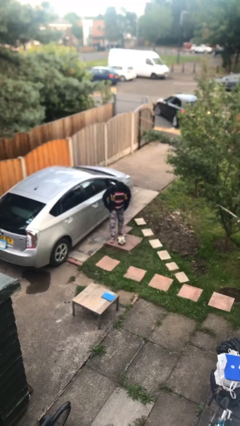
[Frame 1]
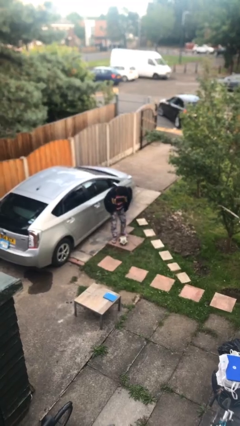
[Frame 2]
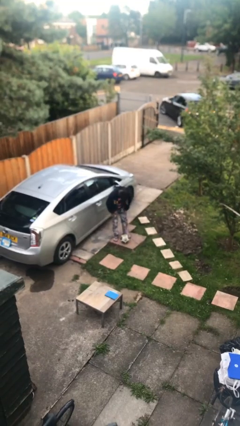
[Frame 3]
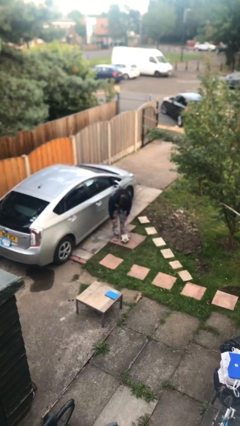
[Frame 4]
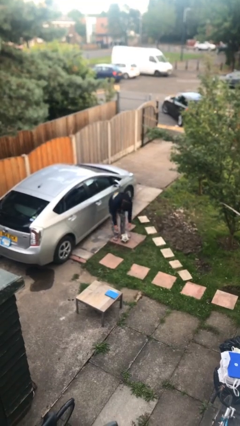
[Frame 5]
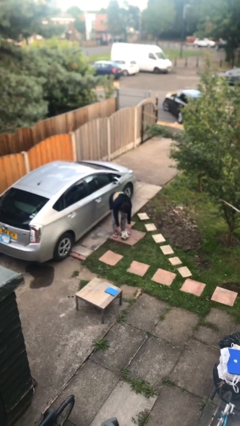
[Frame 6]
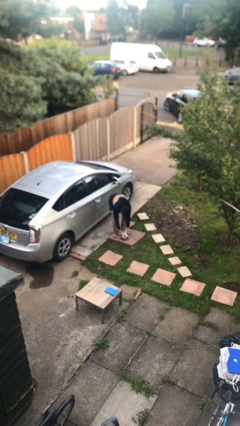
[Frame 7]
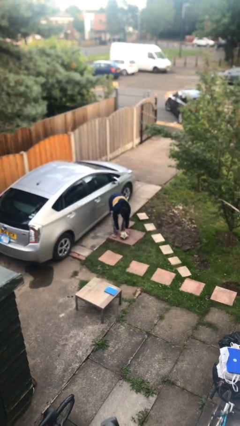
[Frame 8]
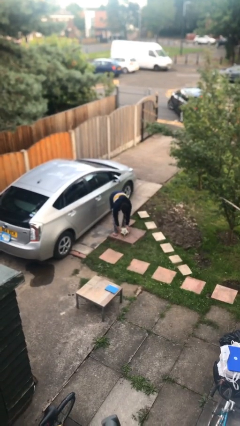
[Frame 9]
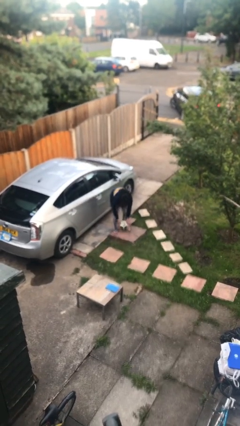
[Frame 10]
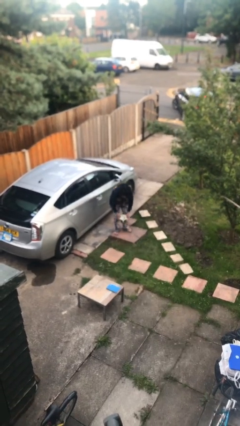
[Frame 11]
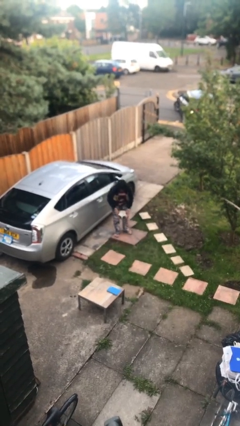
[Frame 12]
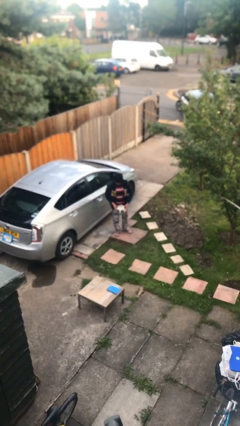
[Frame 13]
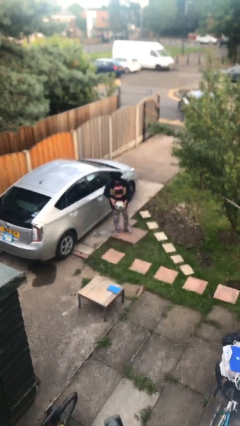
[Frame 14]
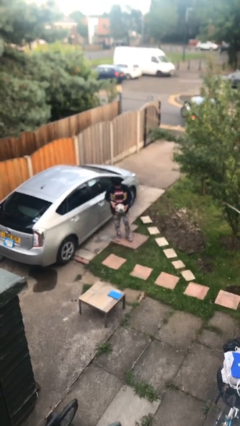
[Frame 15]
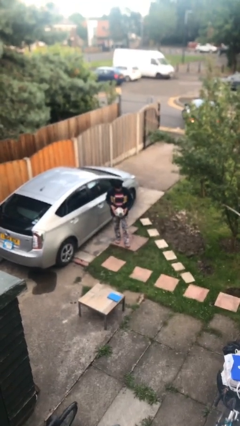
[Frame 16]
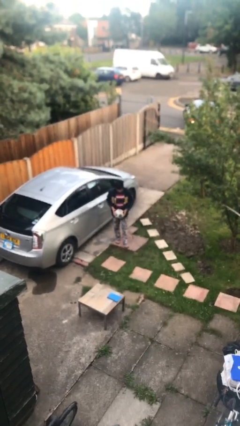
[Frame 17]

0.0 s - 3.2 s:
person picks up object from floor

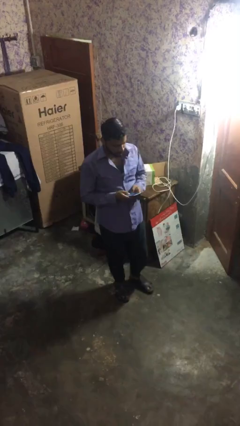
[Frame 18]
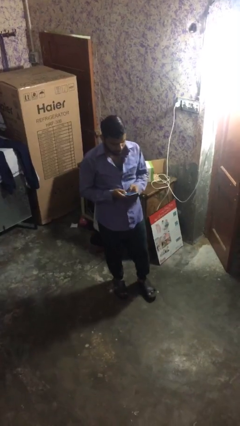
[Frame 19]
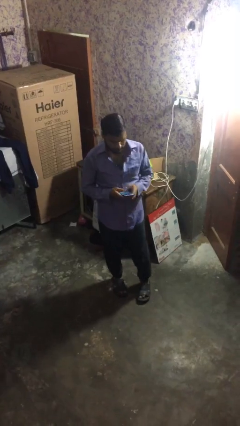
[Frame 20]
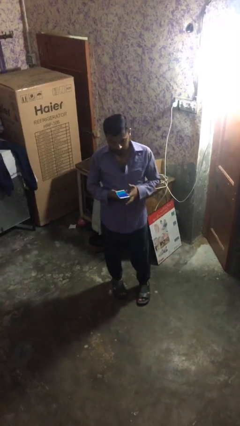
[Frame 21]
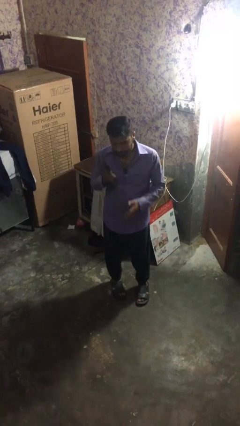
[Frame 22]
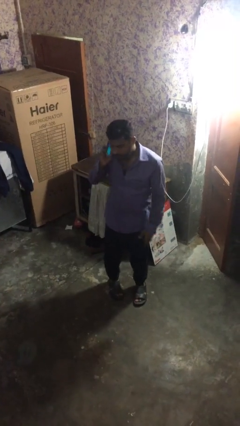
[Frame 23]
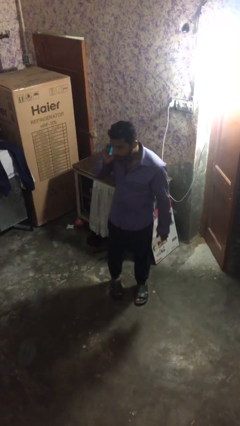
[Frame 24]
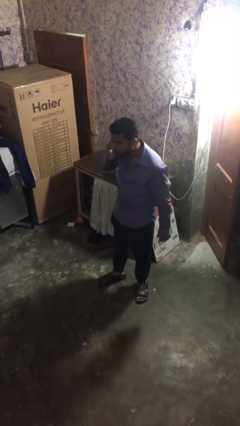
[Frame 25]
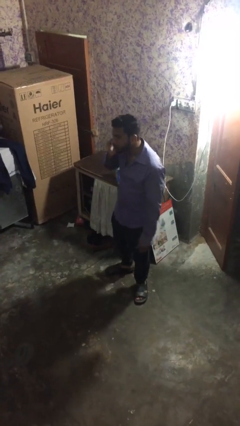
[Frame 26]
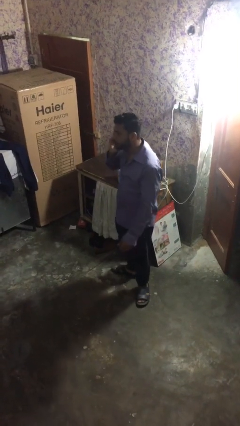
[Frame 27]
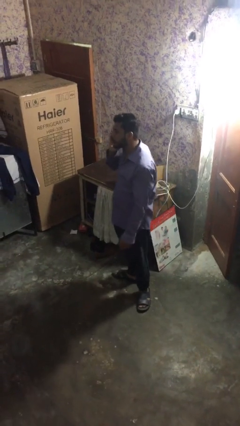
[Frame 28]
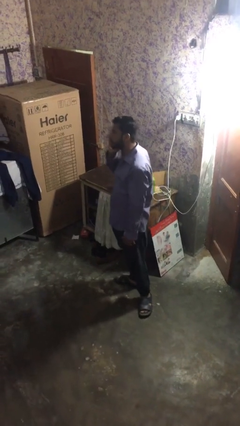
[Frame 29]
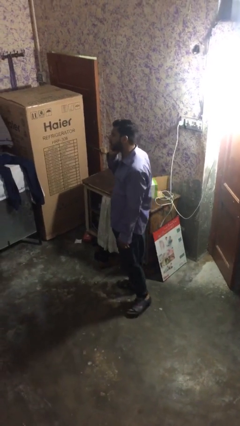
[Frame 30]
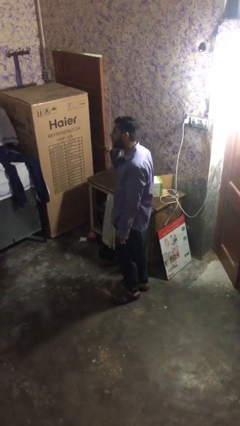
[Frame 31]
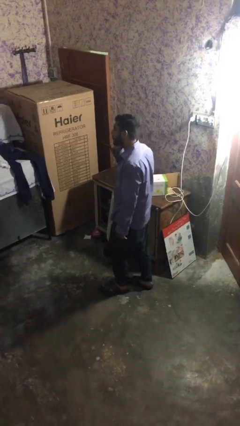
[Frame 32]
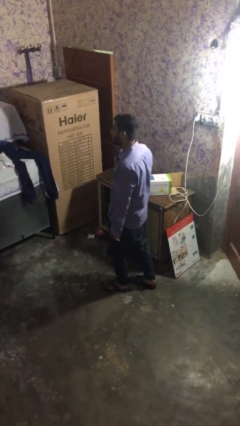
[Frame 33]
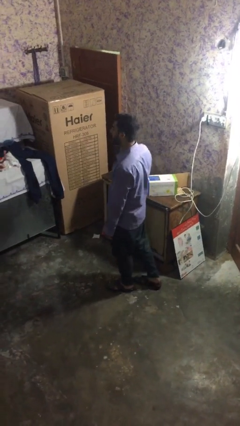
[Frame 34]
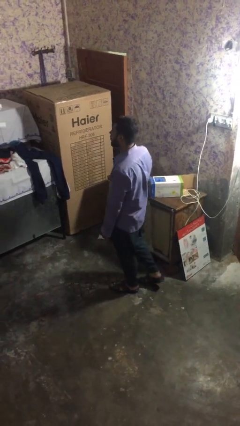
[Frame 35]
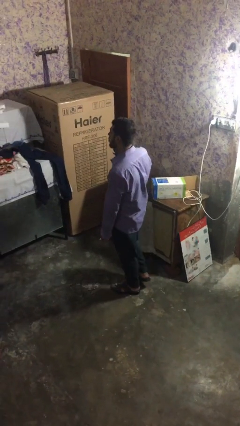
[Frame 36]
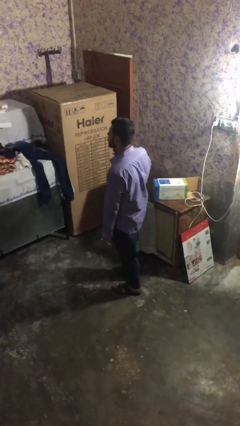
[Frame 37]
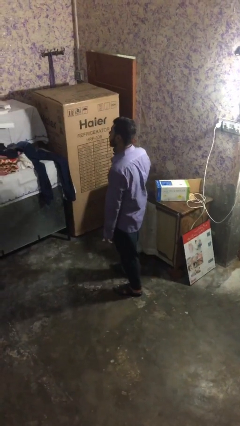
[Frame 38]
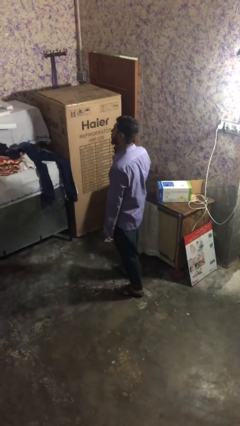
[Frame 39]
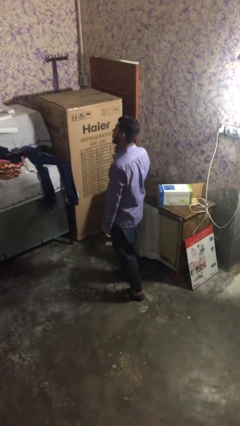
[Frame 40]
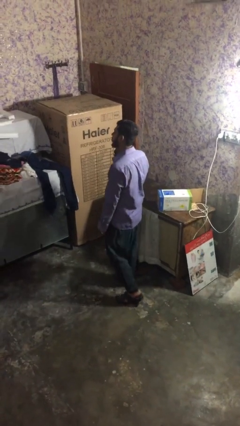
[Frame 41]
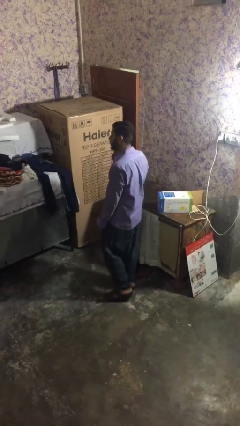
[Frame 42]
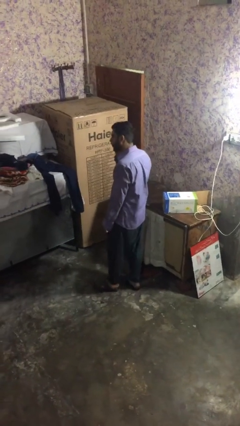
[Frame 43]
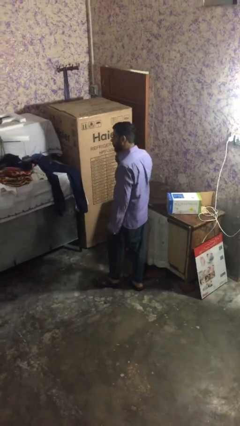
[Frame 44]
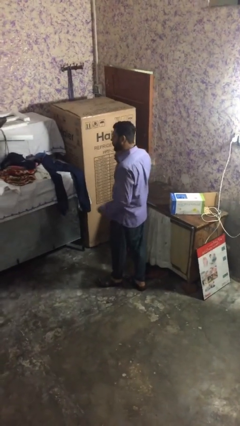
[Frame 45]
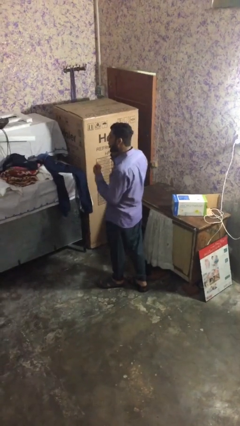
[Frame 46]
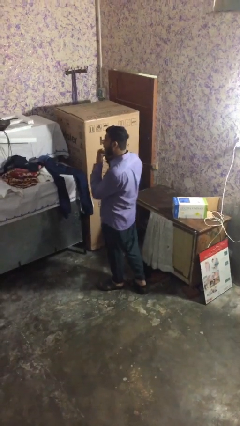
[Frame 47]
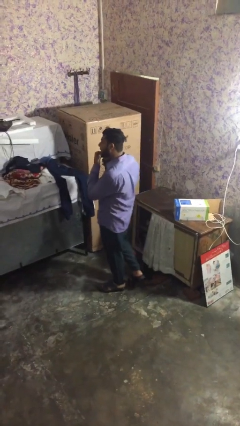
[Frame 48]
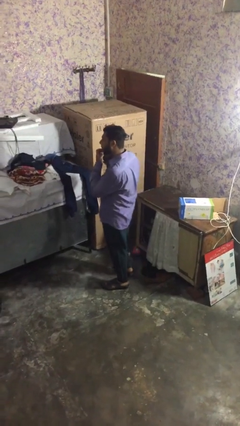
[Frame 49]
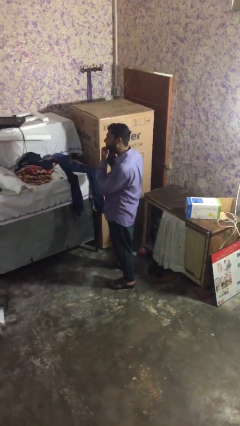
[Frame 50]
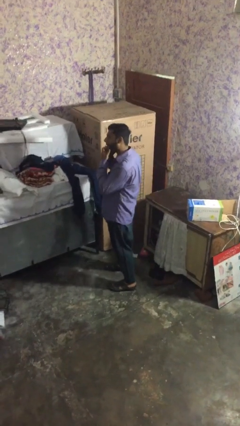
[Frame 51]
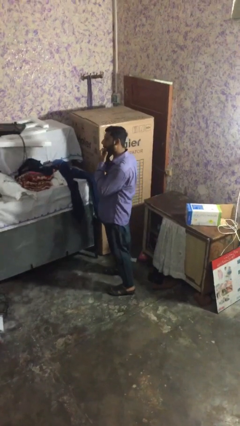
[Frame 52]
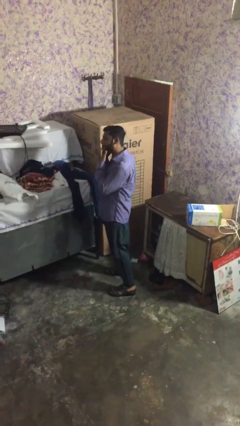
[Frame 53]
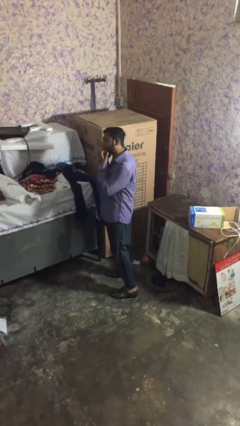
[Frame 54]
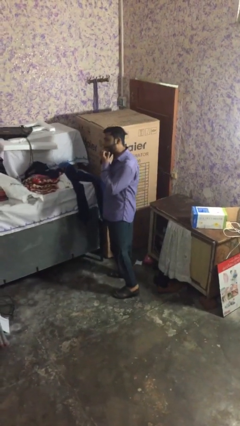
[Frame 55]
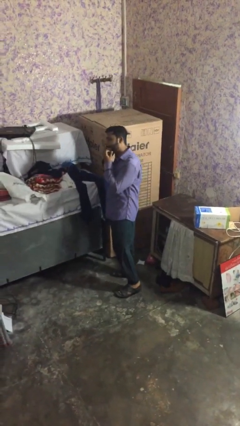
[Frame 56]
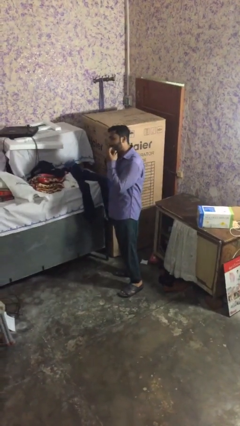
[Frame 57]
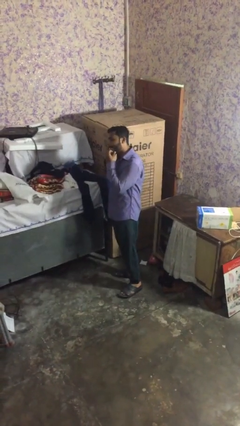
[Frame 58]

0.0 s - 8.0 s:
person talks on phone

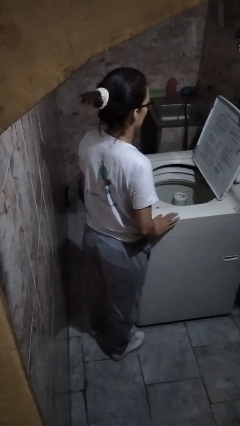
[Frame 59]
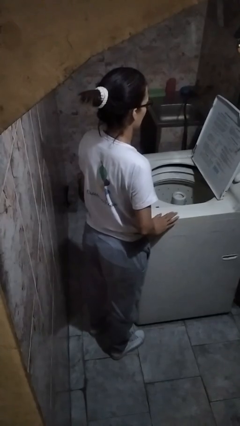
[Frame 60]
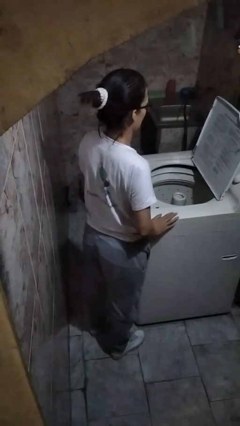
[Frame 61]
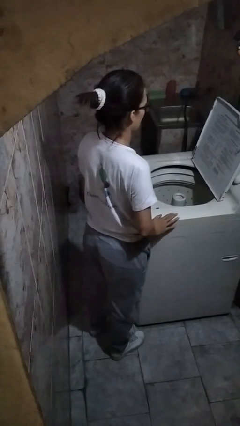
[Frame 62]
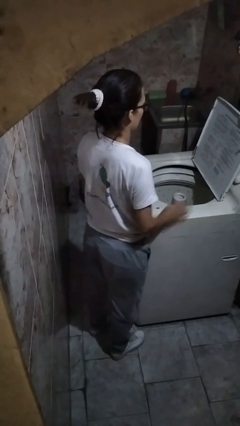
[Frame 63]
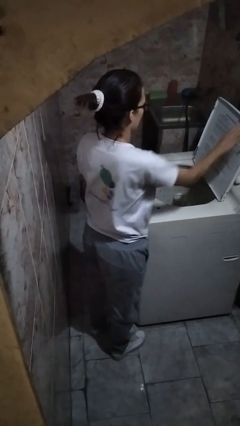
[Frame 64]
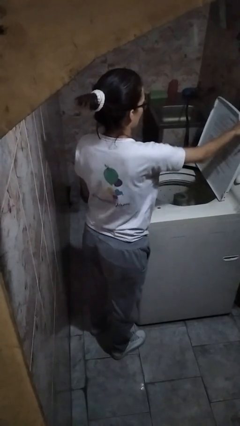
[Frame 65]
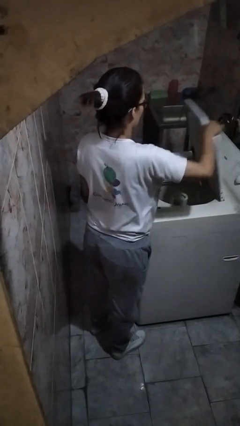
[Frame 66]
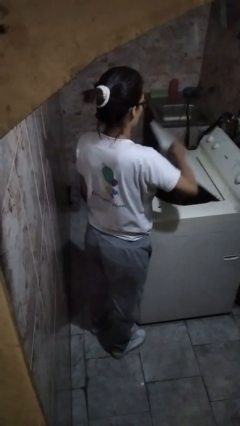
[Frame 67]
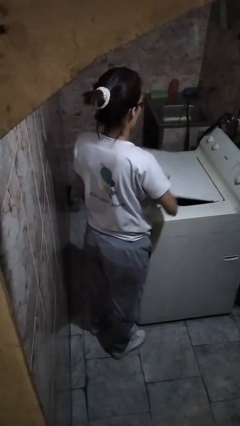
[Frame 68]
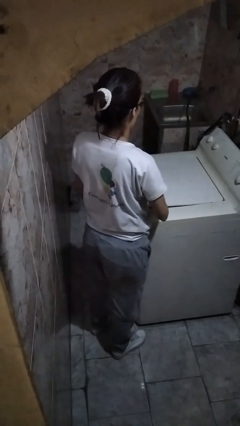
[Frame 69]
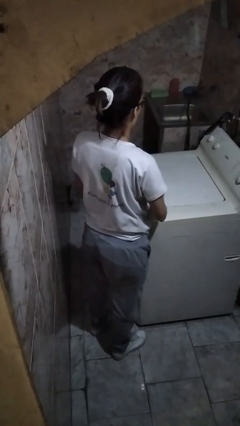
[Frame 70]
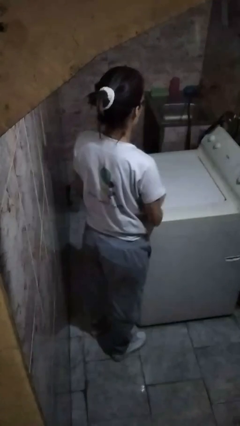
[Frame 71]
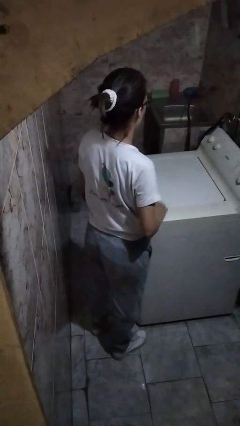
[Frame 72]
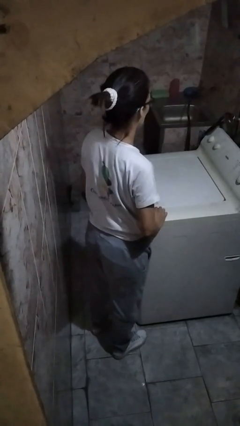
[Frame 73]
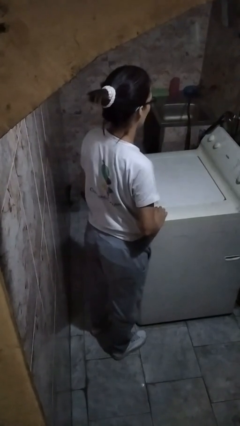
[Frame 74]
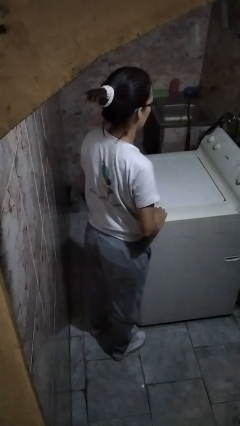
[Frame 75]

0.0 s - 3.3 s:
person closes clothes washer

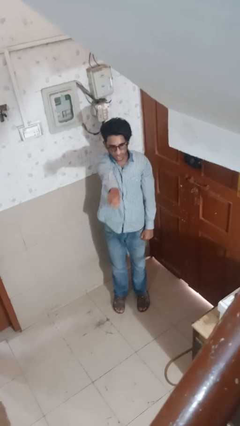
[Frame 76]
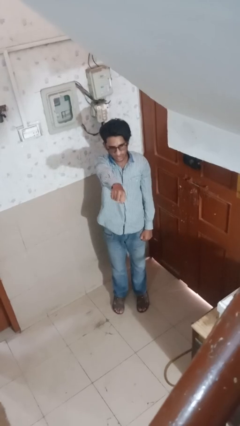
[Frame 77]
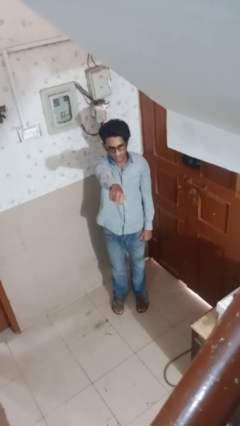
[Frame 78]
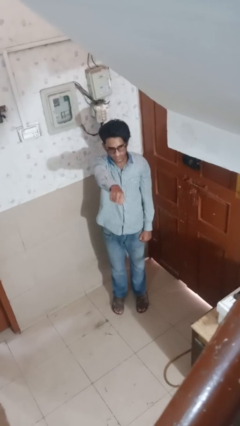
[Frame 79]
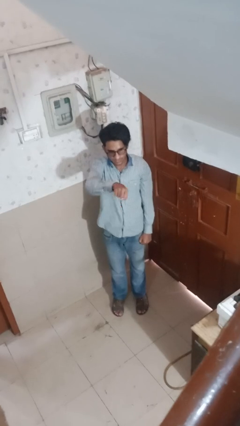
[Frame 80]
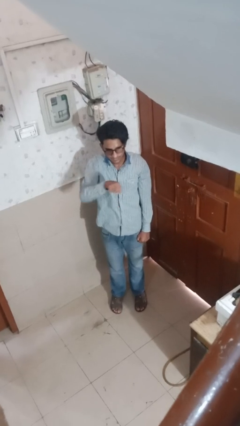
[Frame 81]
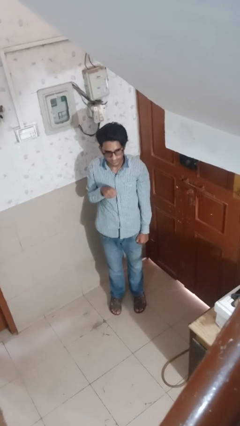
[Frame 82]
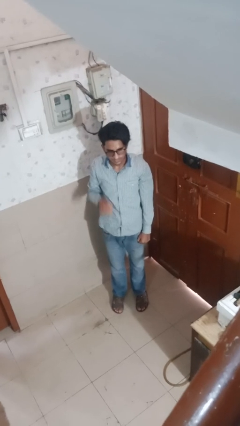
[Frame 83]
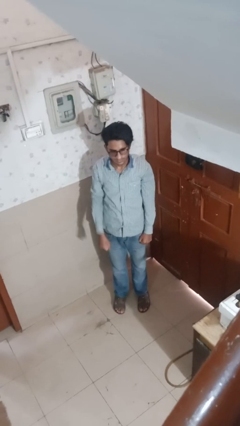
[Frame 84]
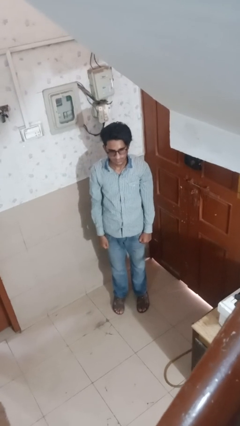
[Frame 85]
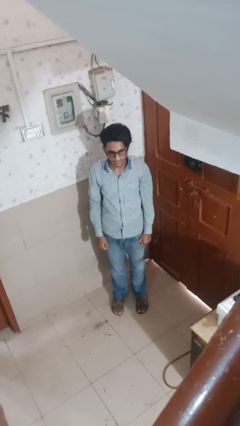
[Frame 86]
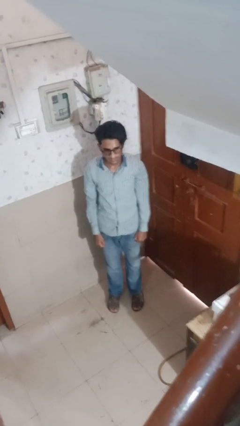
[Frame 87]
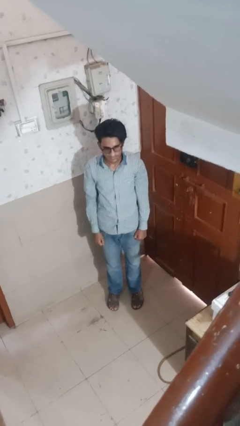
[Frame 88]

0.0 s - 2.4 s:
person punches

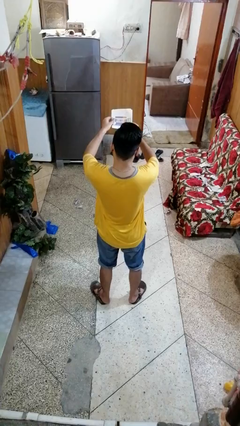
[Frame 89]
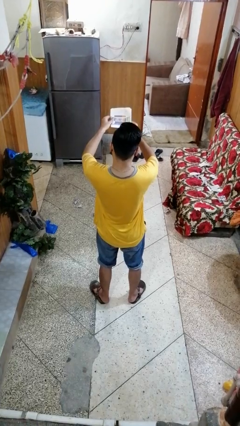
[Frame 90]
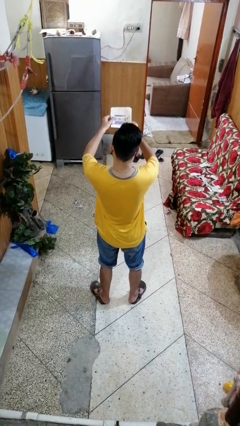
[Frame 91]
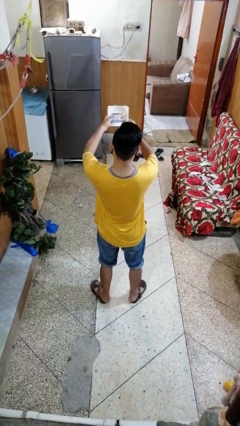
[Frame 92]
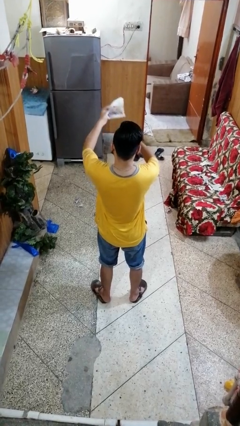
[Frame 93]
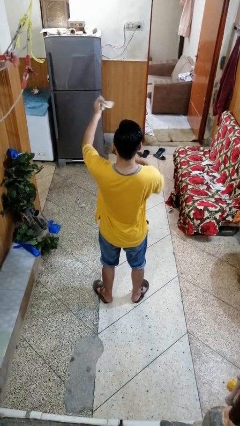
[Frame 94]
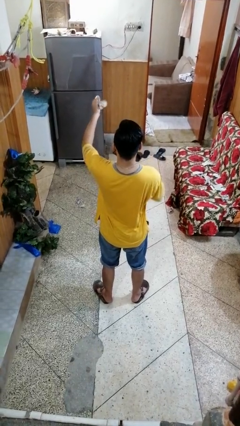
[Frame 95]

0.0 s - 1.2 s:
person crumples paper
